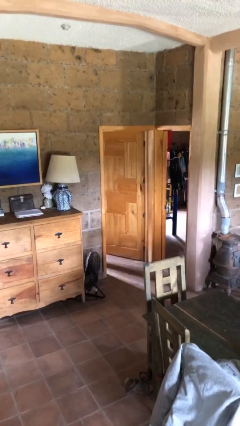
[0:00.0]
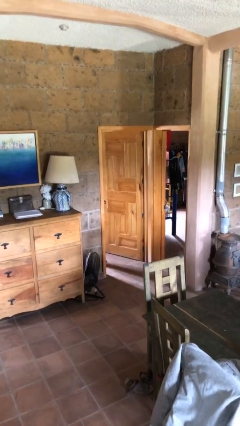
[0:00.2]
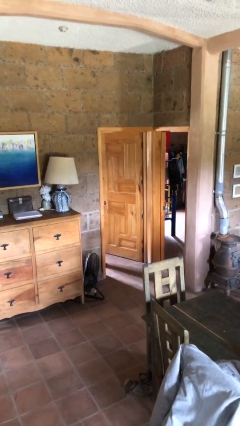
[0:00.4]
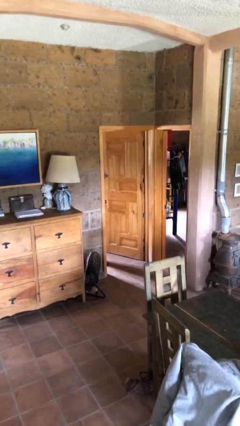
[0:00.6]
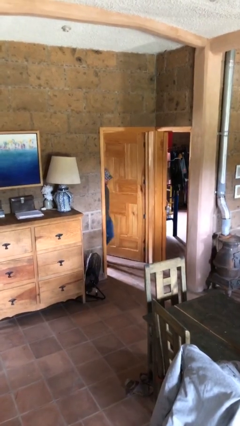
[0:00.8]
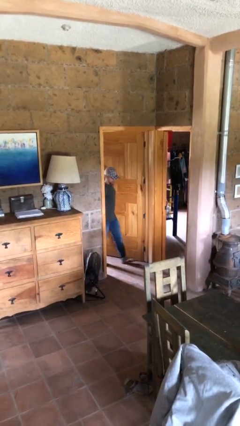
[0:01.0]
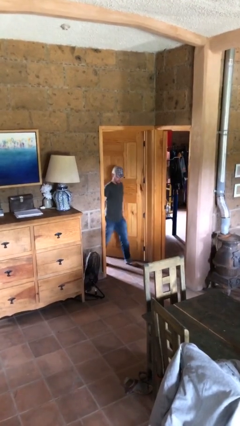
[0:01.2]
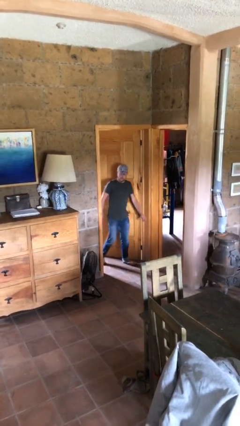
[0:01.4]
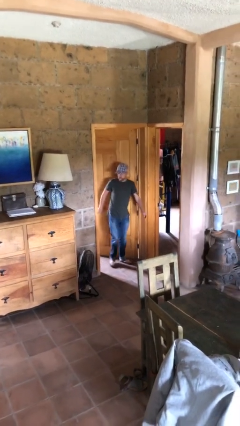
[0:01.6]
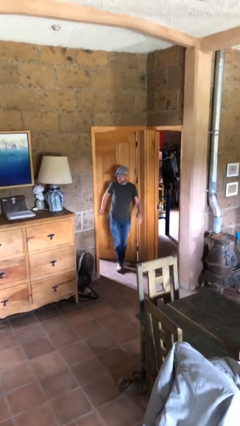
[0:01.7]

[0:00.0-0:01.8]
person enters scene through structure

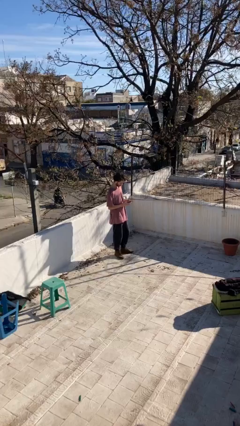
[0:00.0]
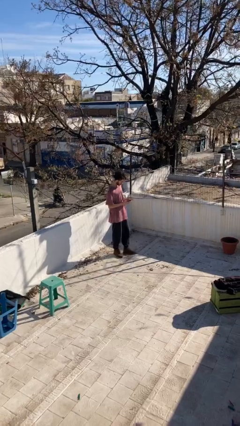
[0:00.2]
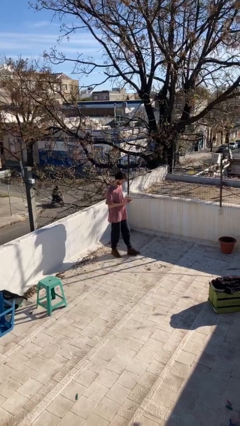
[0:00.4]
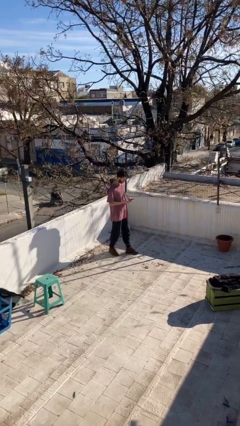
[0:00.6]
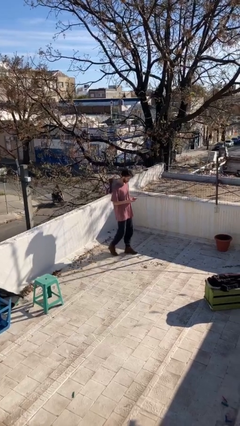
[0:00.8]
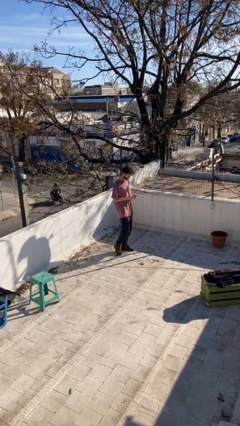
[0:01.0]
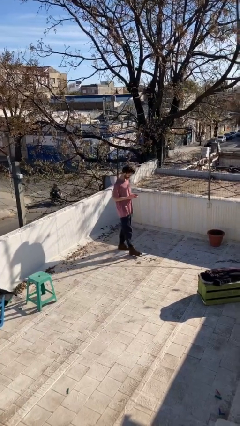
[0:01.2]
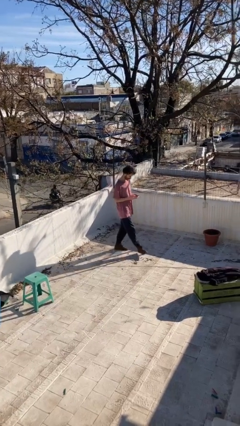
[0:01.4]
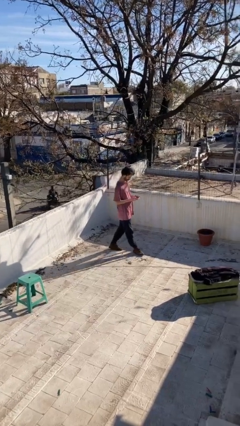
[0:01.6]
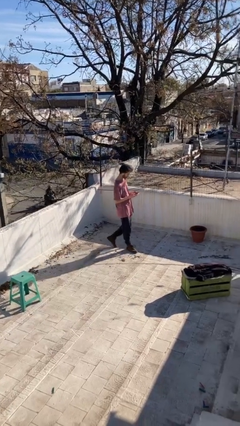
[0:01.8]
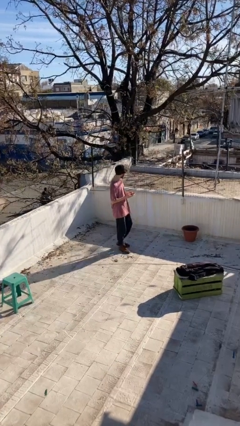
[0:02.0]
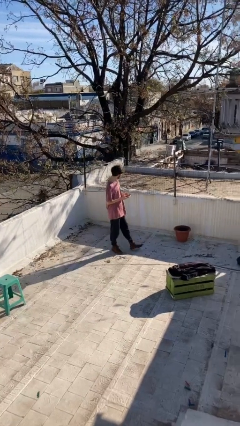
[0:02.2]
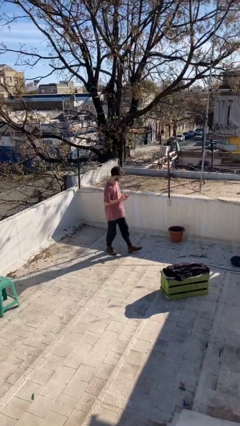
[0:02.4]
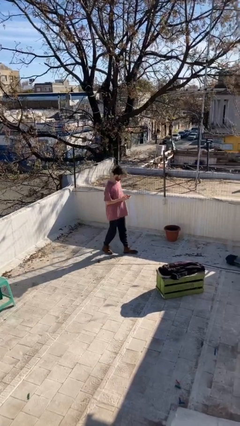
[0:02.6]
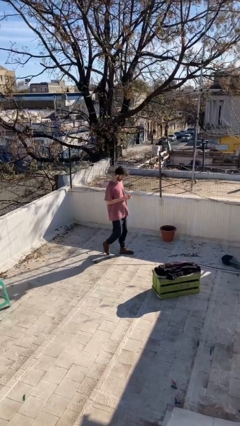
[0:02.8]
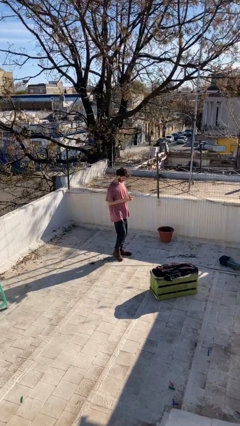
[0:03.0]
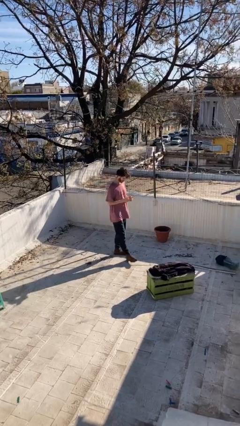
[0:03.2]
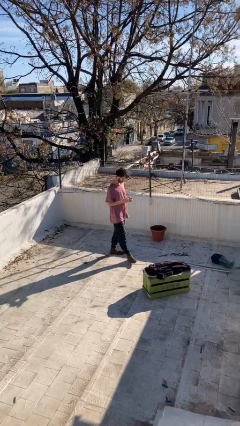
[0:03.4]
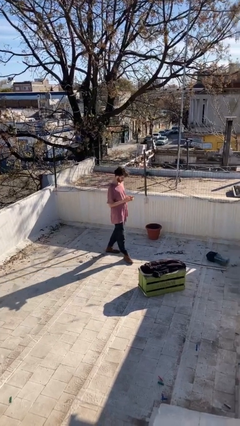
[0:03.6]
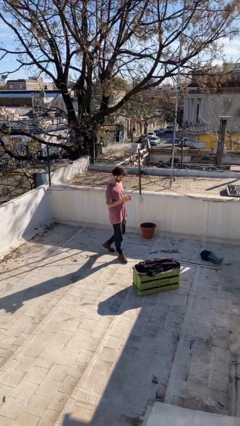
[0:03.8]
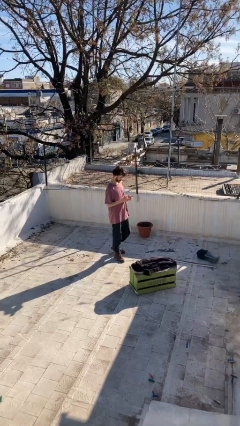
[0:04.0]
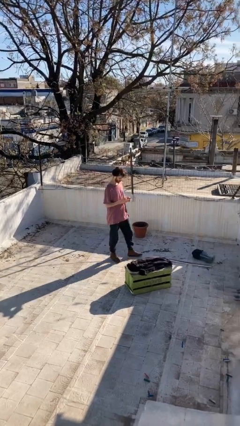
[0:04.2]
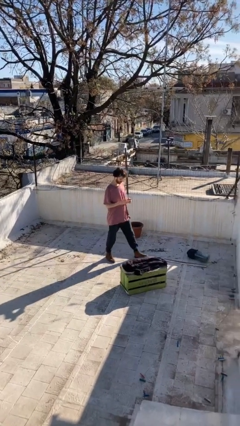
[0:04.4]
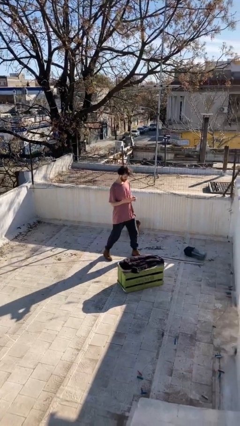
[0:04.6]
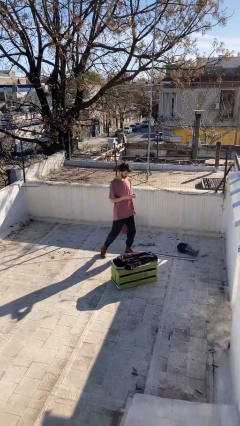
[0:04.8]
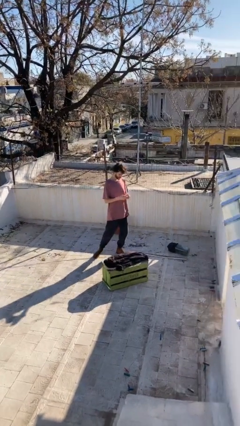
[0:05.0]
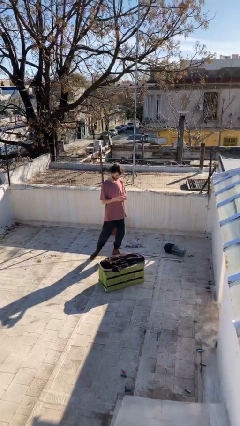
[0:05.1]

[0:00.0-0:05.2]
person texts on phone

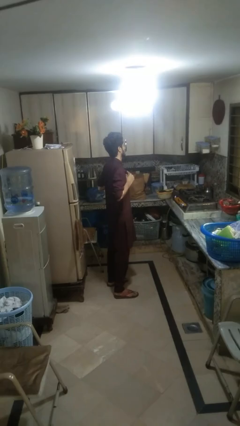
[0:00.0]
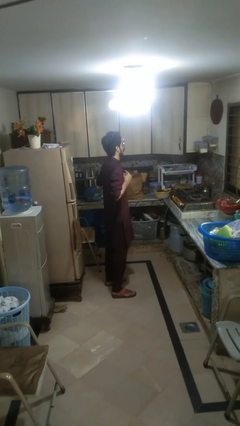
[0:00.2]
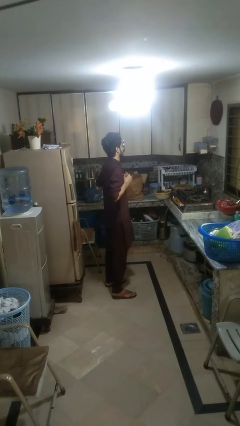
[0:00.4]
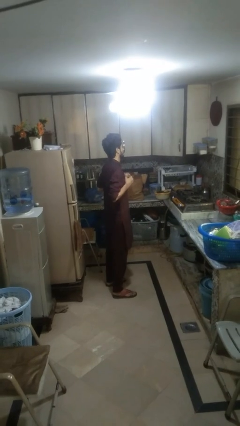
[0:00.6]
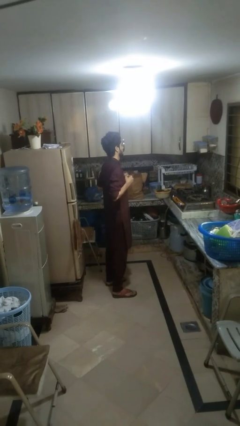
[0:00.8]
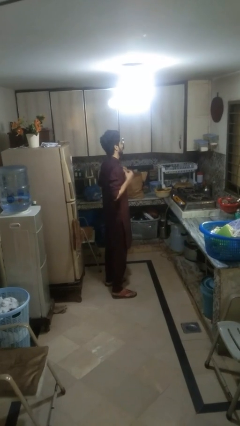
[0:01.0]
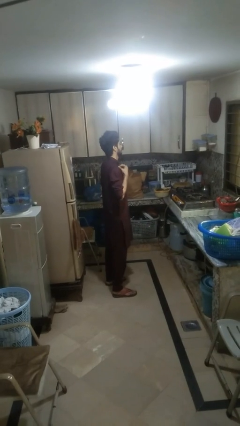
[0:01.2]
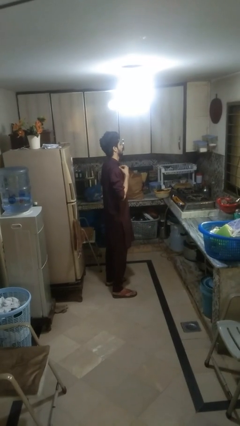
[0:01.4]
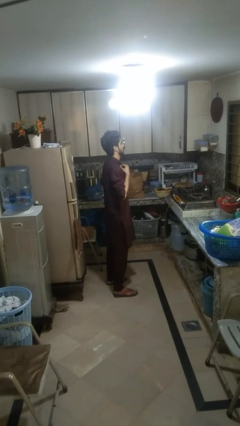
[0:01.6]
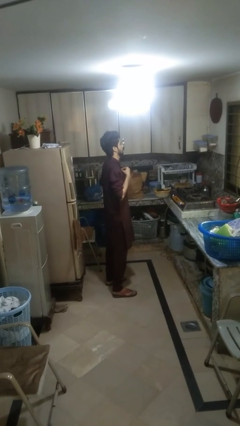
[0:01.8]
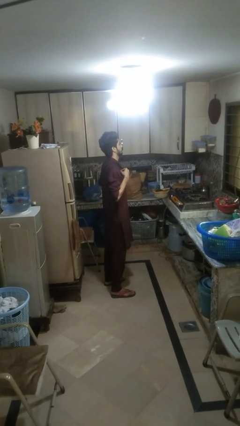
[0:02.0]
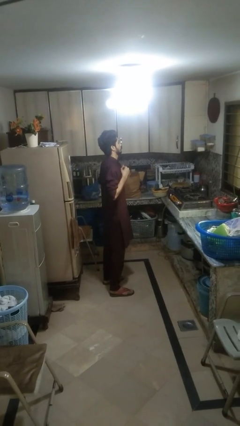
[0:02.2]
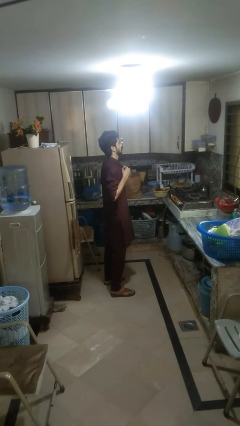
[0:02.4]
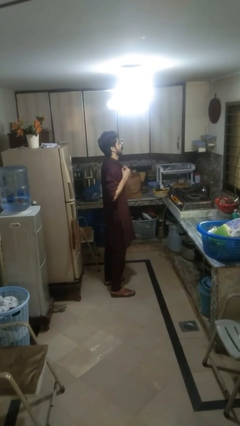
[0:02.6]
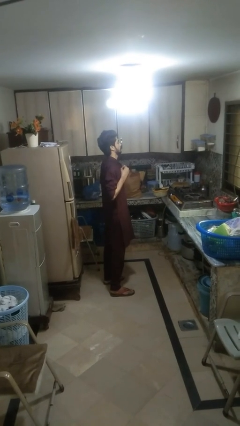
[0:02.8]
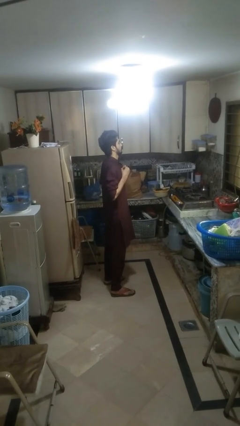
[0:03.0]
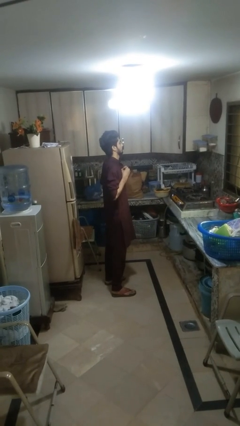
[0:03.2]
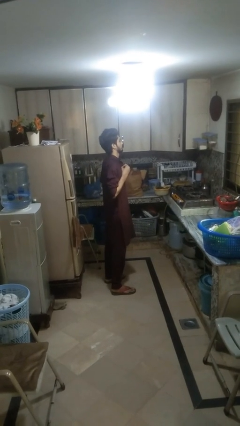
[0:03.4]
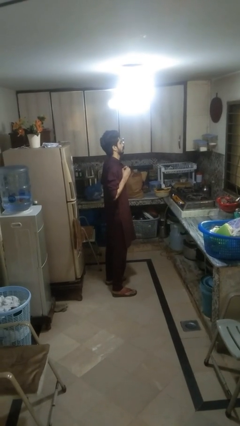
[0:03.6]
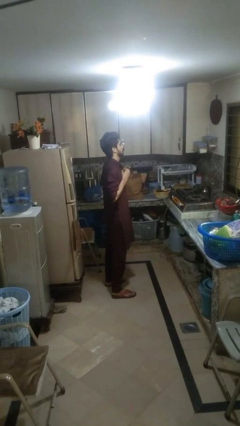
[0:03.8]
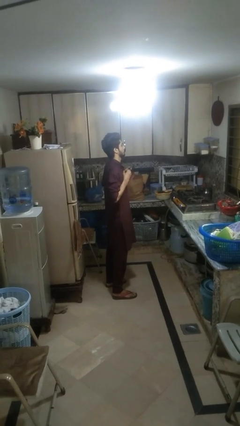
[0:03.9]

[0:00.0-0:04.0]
person buttons shirt

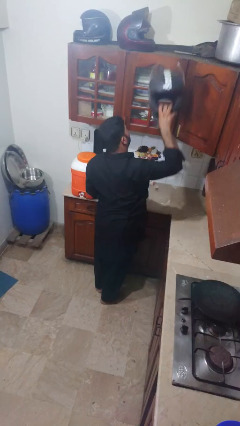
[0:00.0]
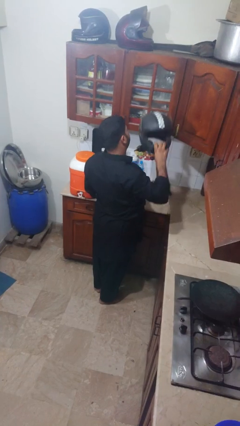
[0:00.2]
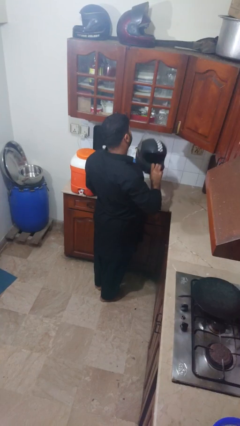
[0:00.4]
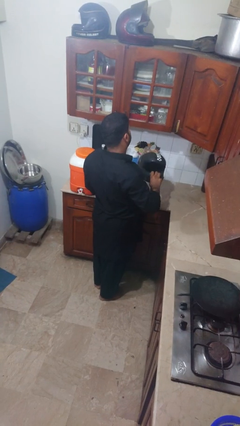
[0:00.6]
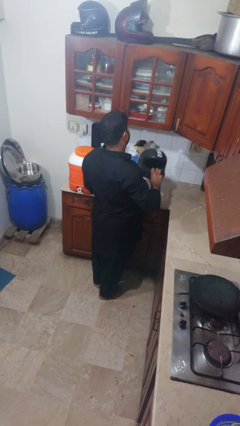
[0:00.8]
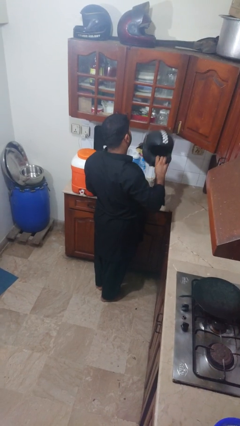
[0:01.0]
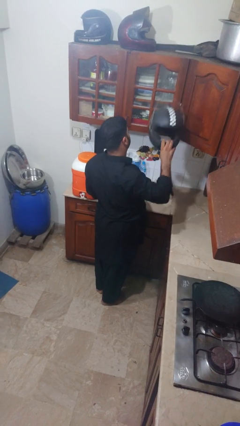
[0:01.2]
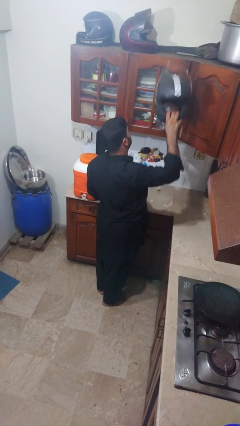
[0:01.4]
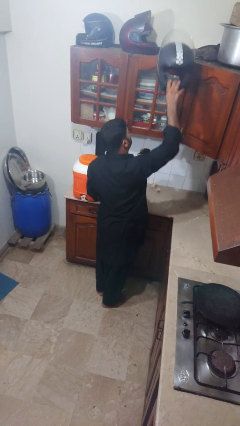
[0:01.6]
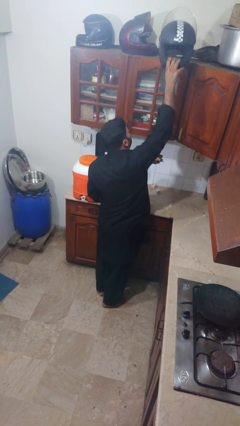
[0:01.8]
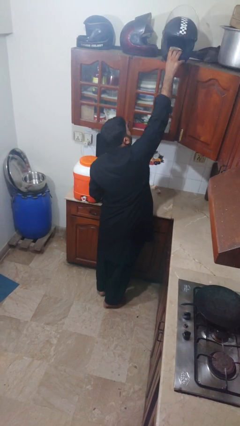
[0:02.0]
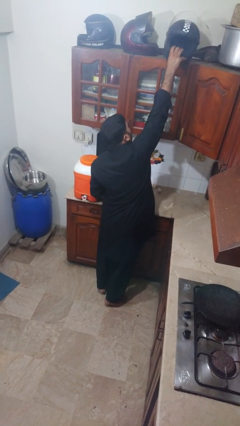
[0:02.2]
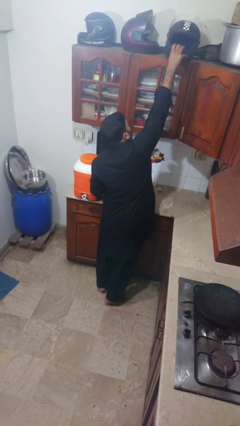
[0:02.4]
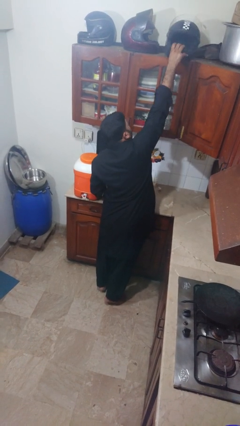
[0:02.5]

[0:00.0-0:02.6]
person puts down object on shelf

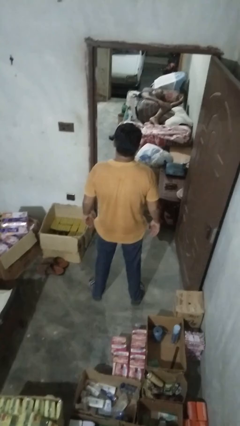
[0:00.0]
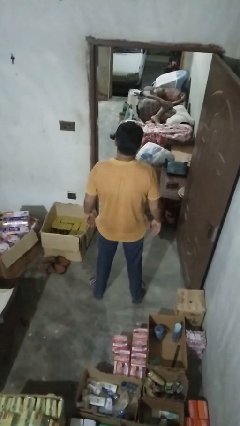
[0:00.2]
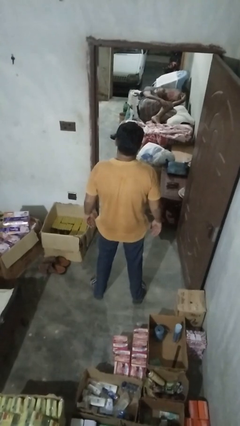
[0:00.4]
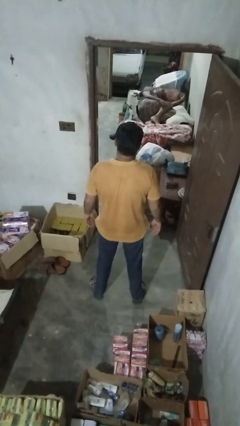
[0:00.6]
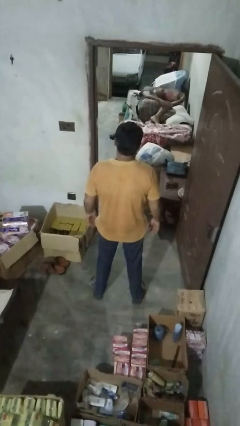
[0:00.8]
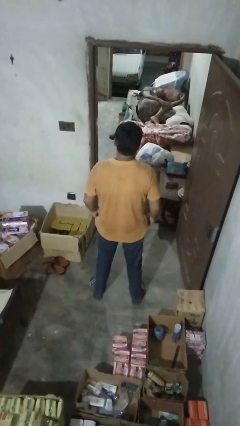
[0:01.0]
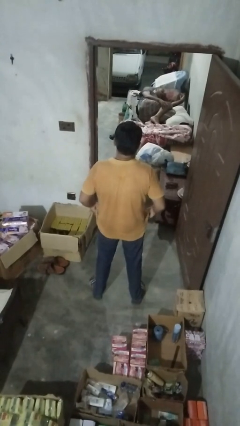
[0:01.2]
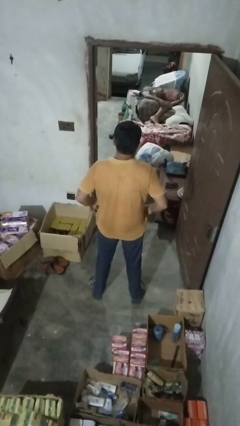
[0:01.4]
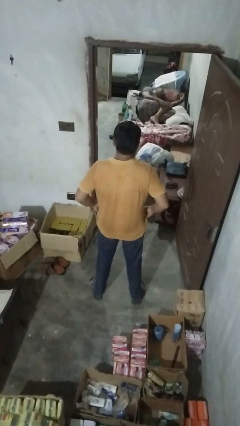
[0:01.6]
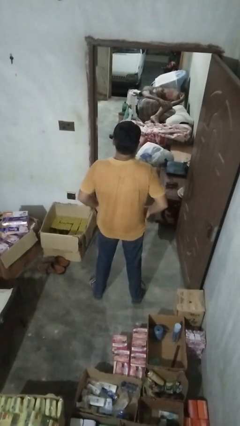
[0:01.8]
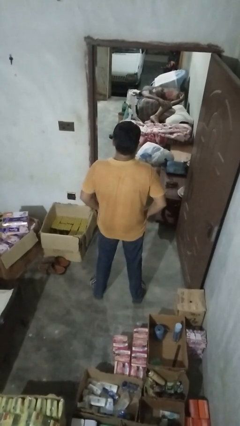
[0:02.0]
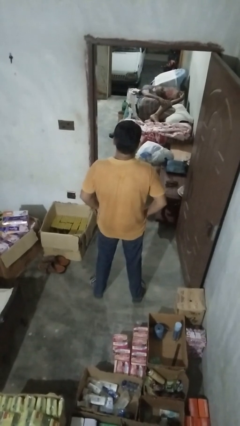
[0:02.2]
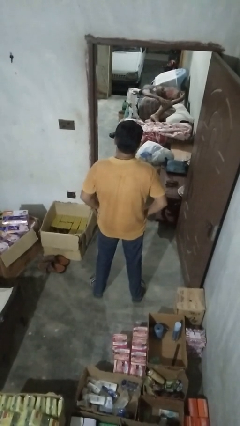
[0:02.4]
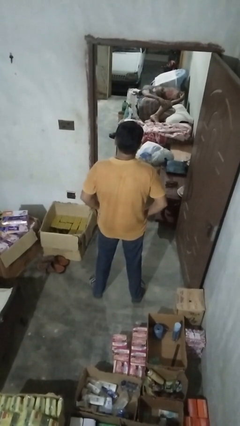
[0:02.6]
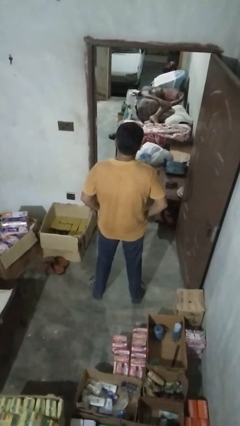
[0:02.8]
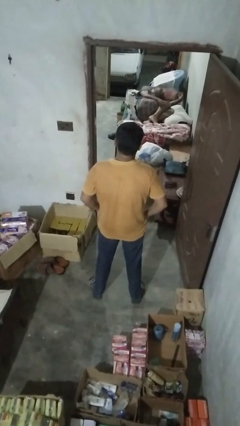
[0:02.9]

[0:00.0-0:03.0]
person puts hands in back pockets

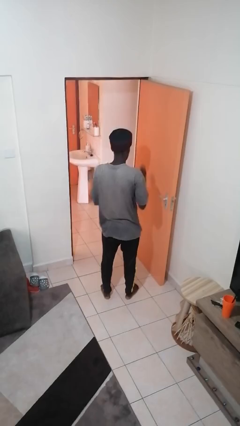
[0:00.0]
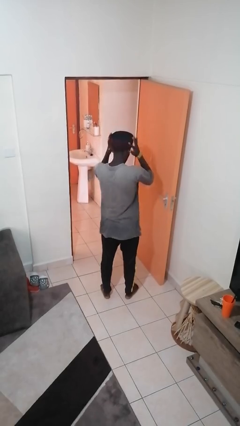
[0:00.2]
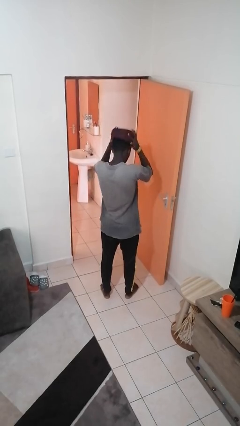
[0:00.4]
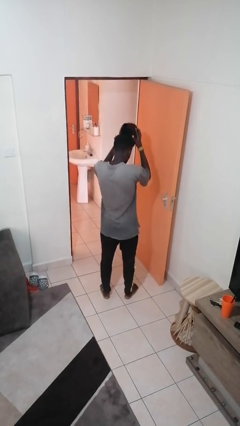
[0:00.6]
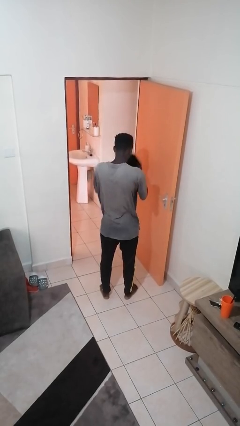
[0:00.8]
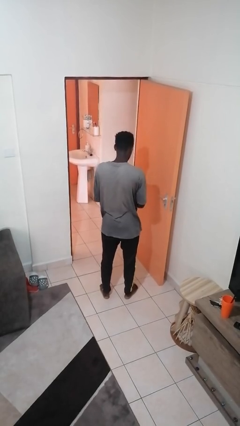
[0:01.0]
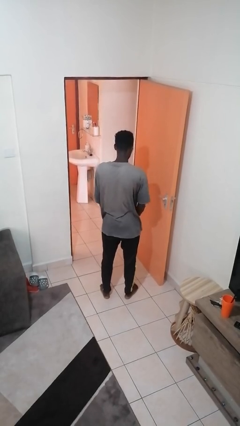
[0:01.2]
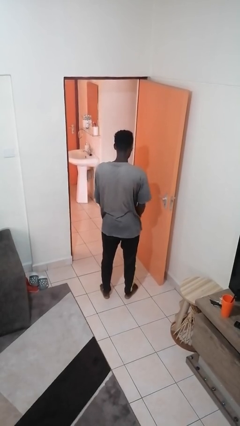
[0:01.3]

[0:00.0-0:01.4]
person takes off hat
